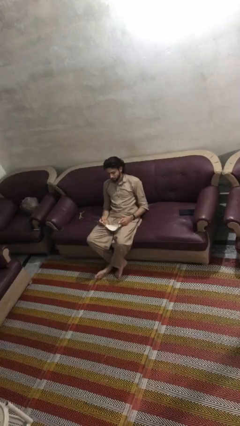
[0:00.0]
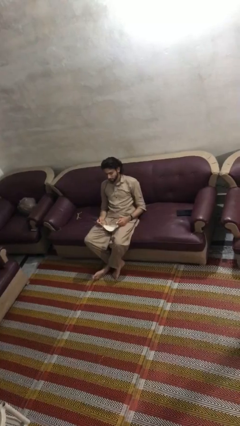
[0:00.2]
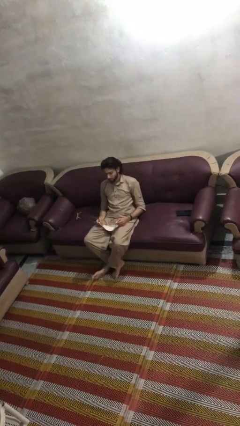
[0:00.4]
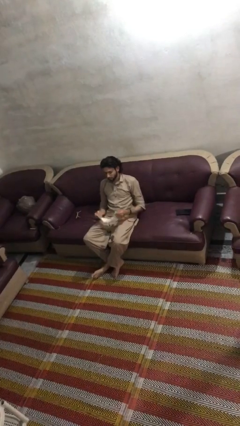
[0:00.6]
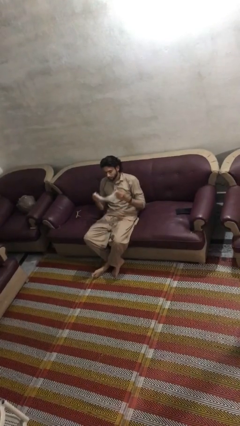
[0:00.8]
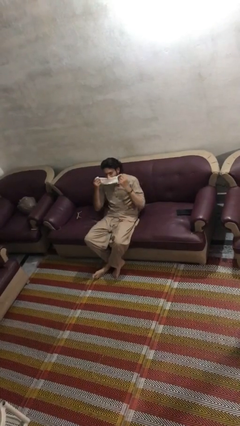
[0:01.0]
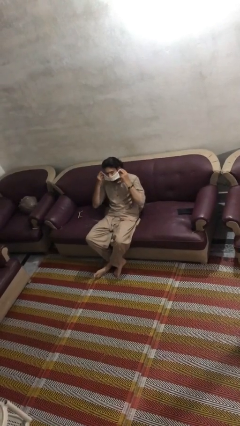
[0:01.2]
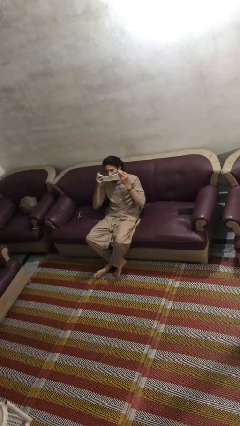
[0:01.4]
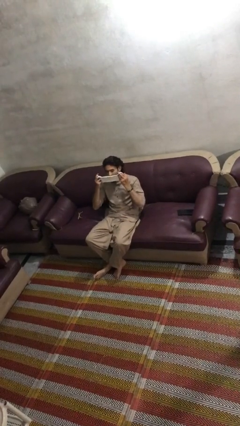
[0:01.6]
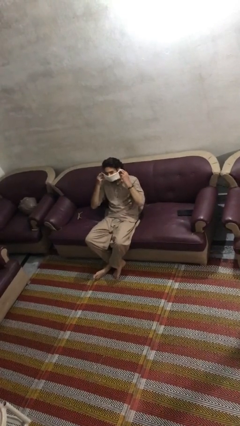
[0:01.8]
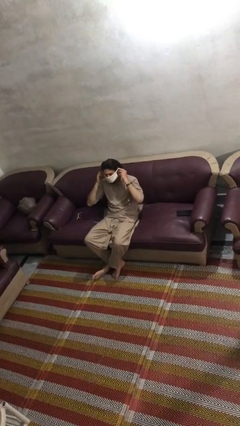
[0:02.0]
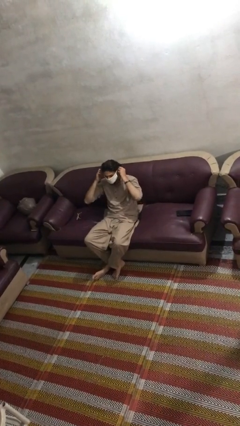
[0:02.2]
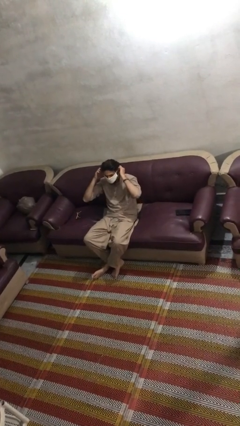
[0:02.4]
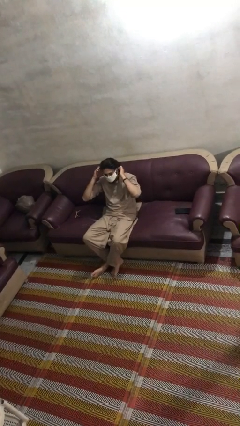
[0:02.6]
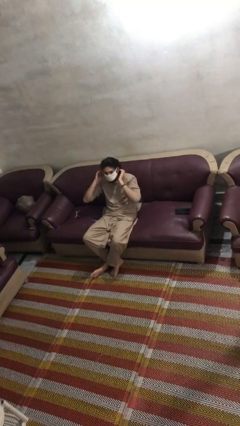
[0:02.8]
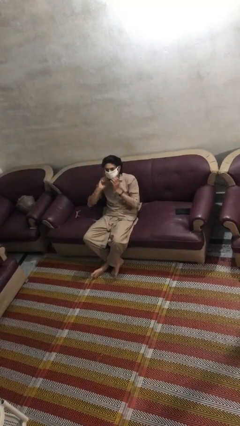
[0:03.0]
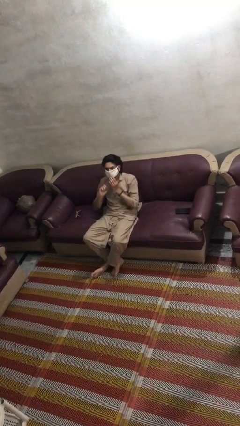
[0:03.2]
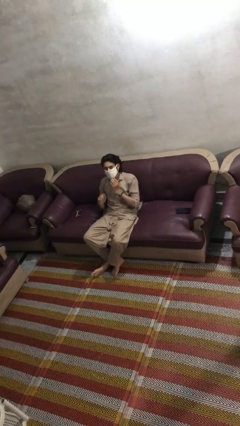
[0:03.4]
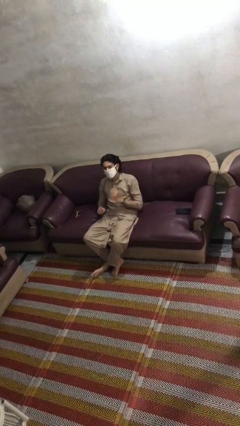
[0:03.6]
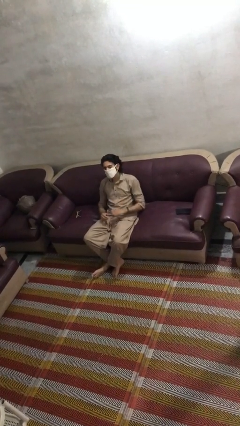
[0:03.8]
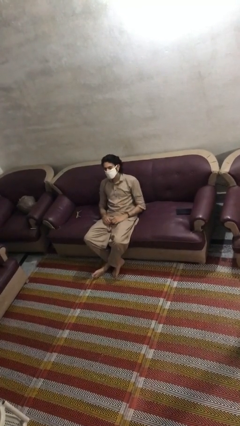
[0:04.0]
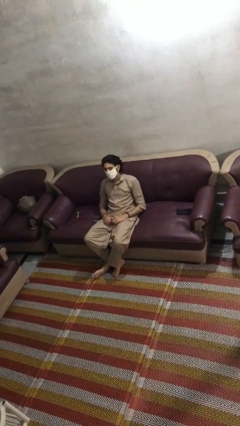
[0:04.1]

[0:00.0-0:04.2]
person puts on facemask

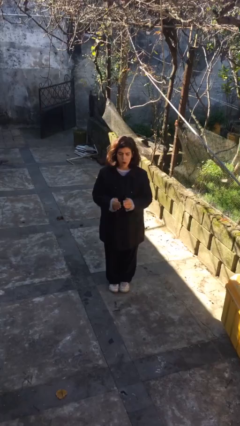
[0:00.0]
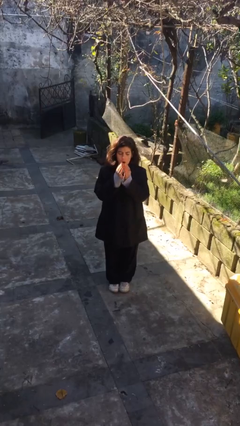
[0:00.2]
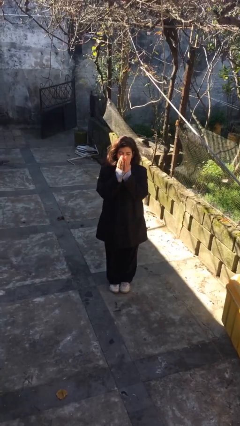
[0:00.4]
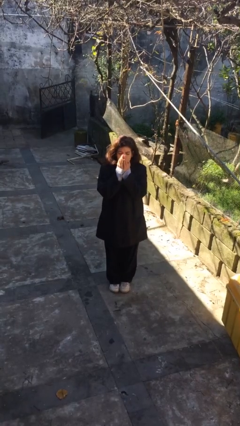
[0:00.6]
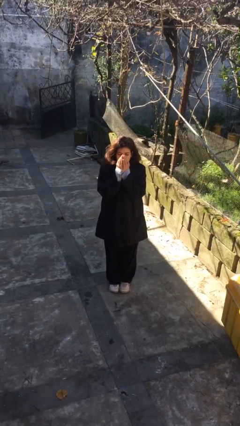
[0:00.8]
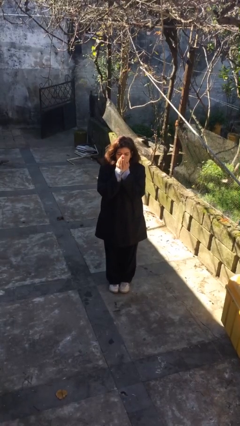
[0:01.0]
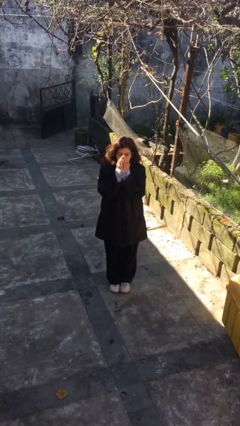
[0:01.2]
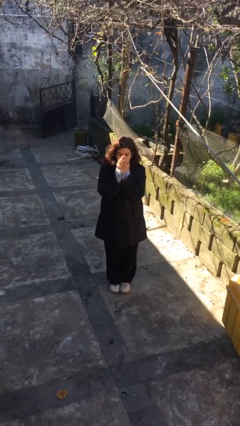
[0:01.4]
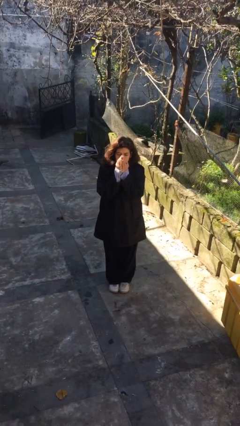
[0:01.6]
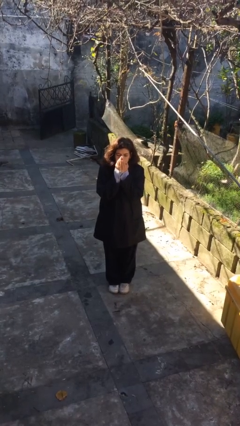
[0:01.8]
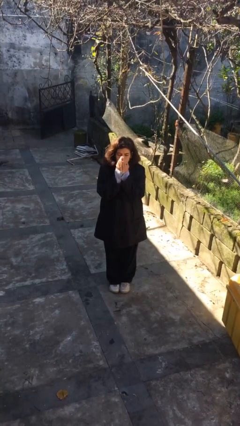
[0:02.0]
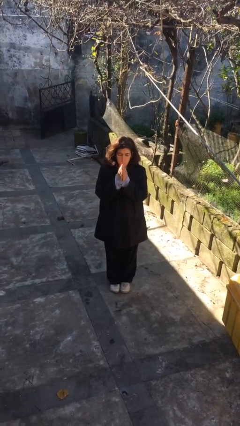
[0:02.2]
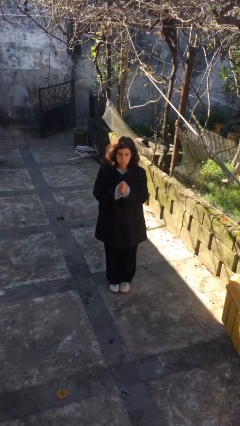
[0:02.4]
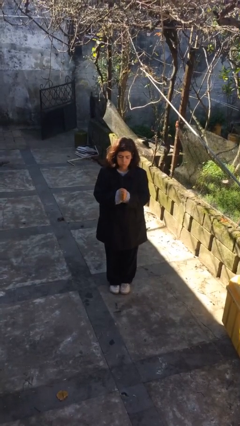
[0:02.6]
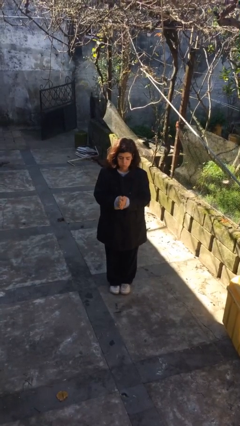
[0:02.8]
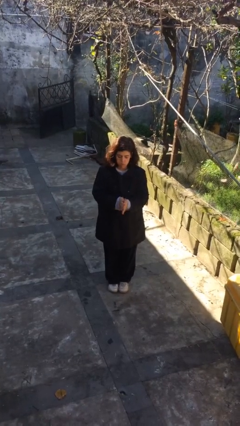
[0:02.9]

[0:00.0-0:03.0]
person blows into hands

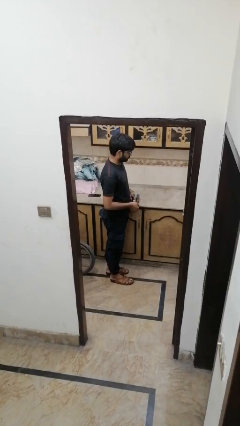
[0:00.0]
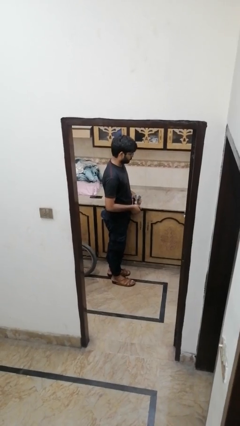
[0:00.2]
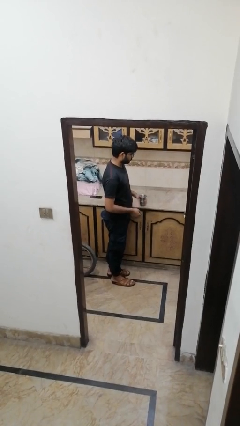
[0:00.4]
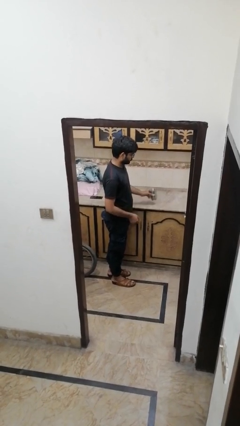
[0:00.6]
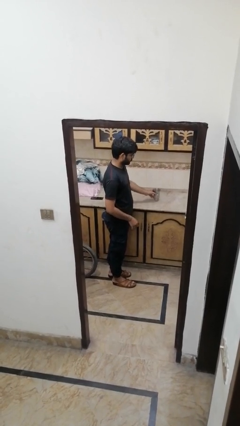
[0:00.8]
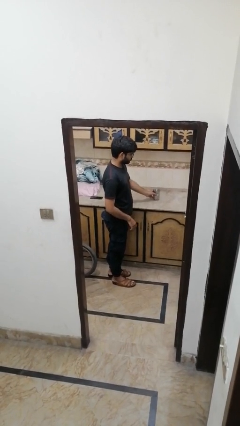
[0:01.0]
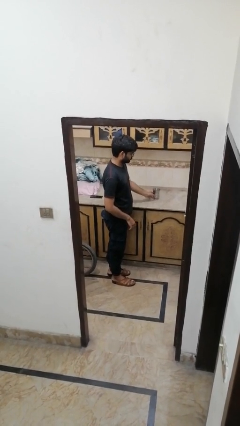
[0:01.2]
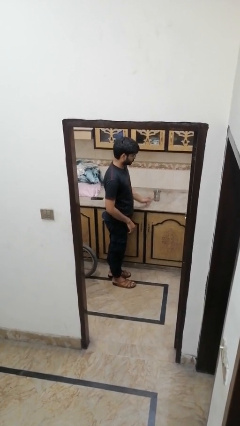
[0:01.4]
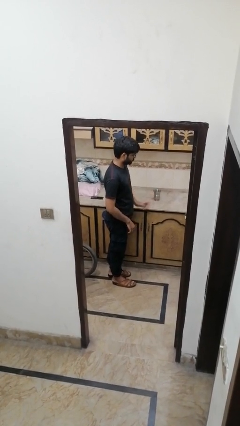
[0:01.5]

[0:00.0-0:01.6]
person puts down object on countertop

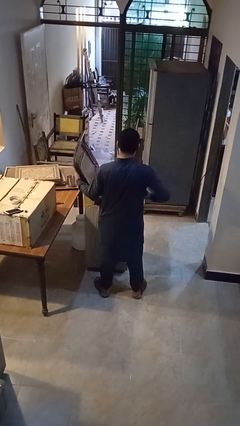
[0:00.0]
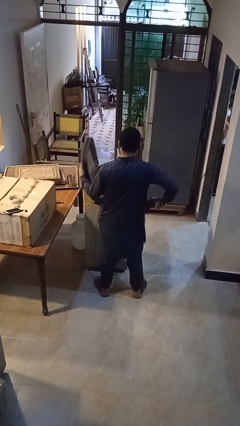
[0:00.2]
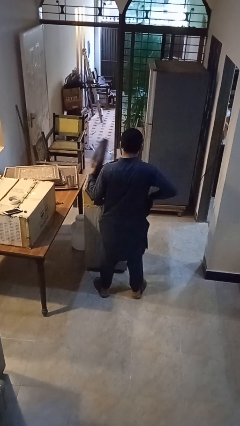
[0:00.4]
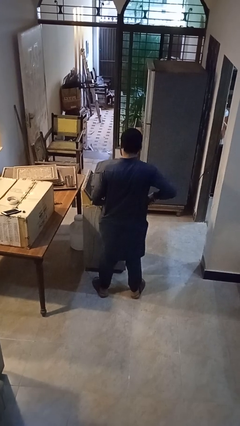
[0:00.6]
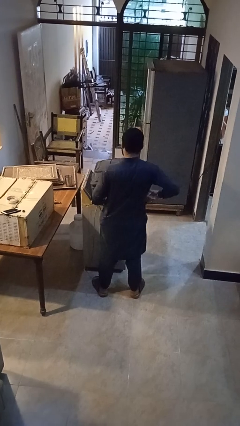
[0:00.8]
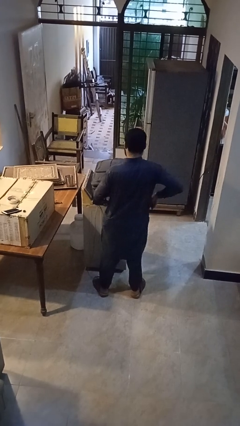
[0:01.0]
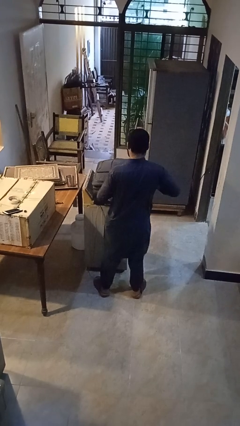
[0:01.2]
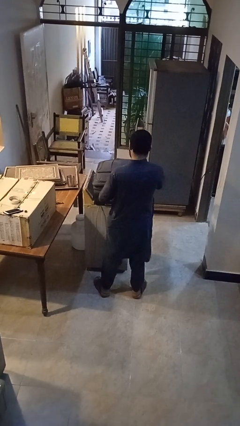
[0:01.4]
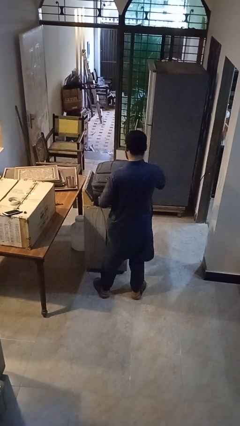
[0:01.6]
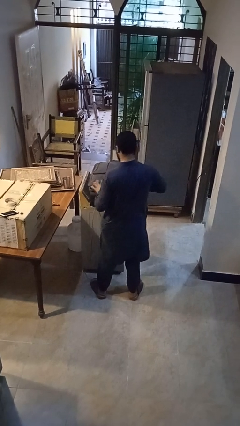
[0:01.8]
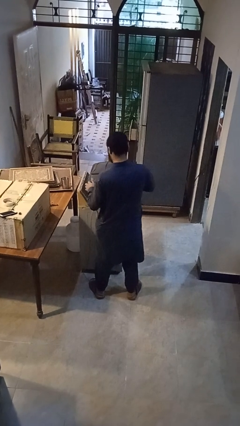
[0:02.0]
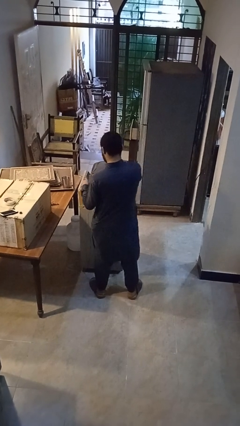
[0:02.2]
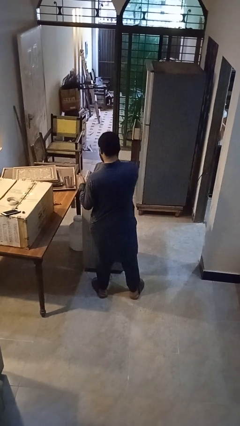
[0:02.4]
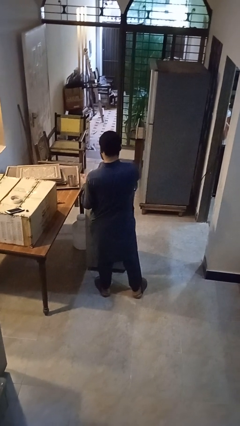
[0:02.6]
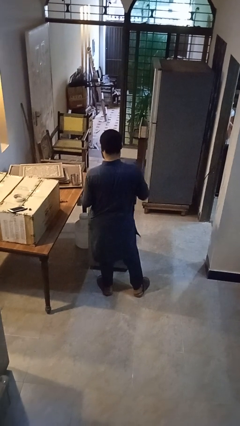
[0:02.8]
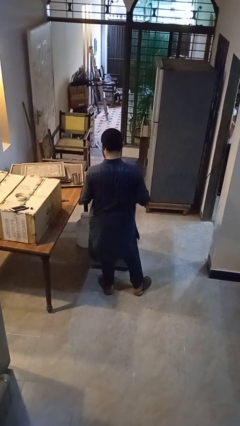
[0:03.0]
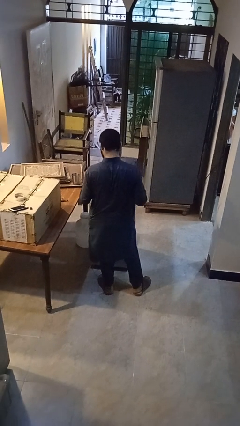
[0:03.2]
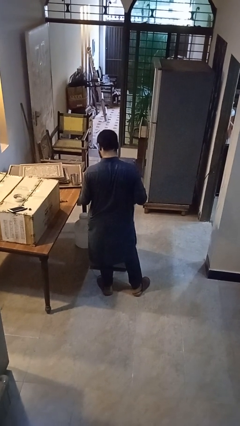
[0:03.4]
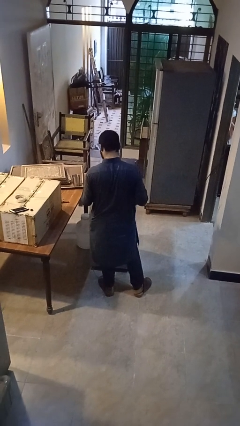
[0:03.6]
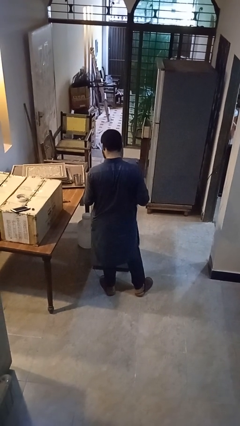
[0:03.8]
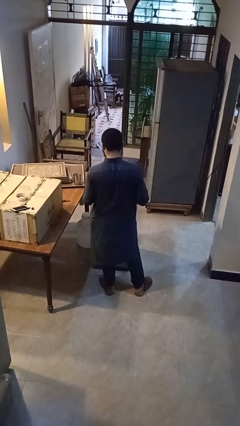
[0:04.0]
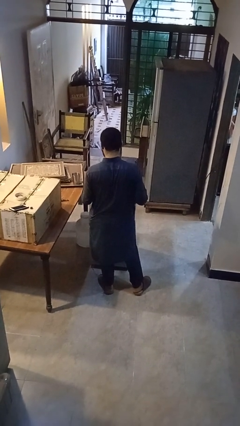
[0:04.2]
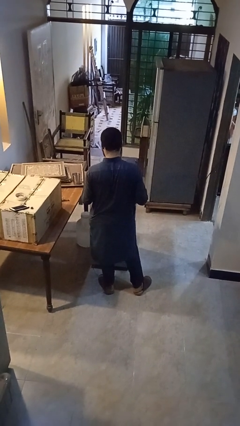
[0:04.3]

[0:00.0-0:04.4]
person closes suitcase

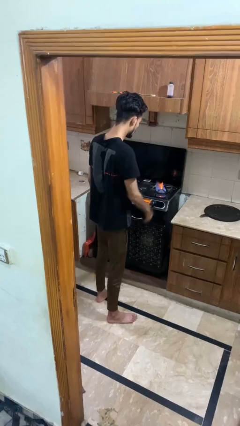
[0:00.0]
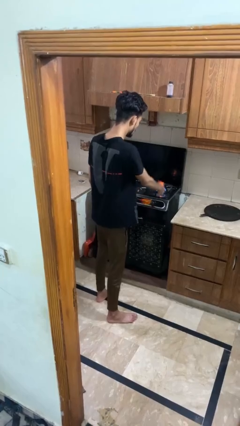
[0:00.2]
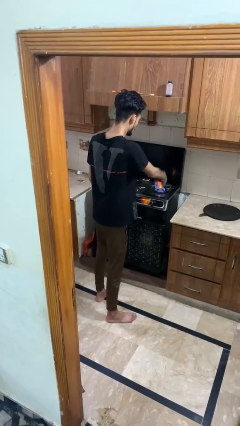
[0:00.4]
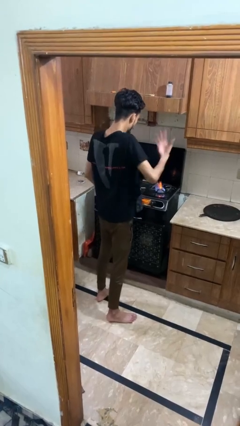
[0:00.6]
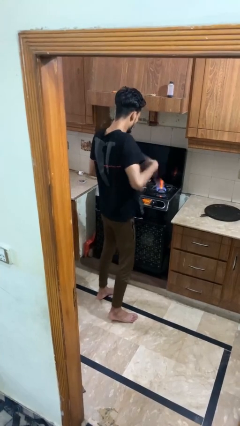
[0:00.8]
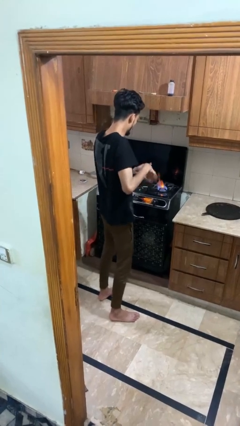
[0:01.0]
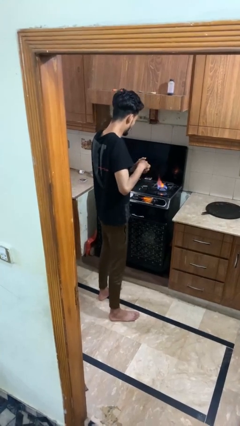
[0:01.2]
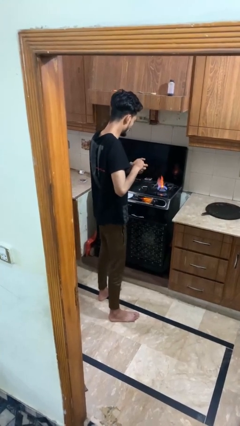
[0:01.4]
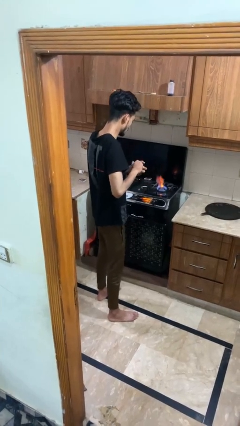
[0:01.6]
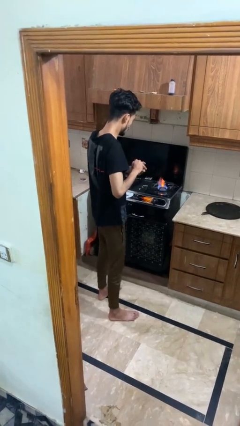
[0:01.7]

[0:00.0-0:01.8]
person burns hand

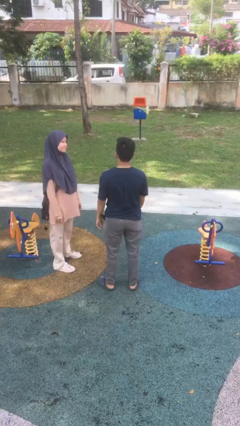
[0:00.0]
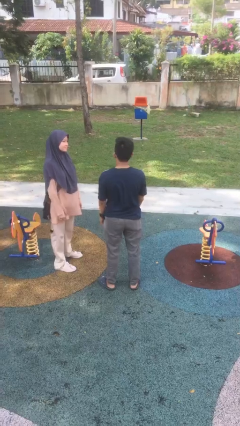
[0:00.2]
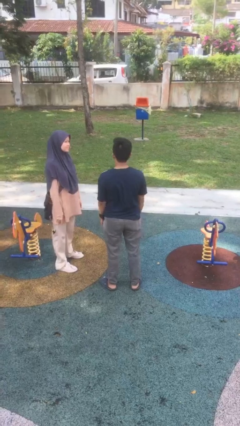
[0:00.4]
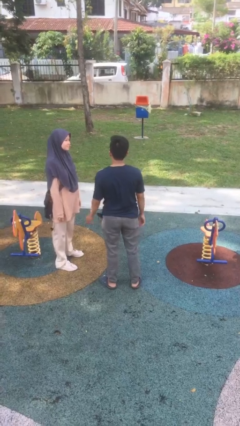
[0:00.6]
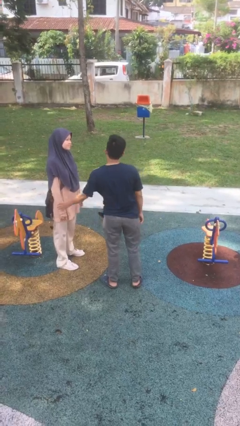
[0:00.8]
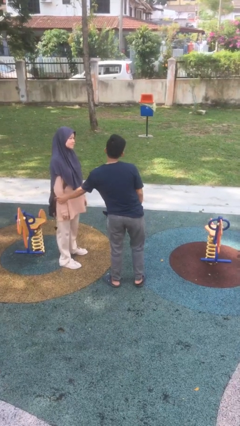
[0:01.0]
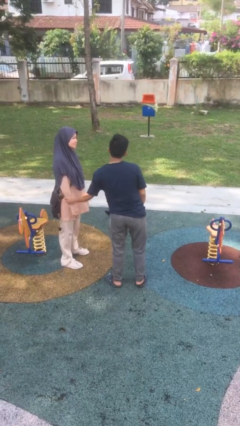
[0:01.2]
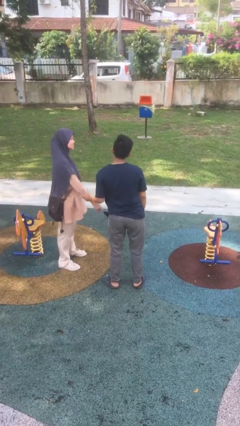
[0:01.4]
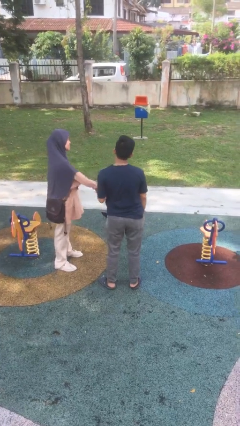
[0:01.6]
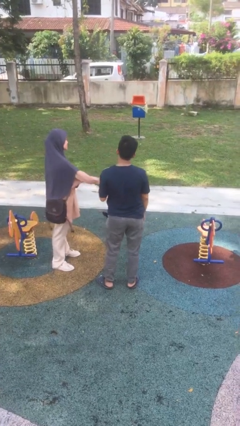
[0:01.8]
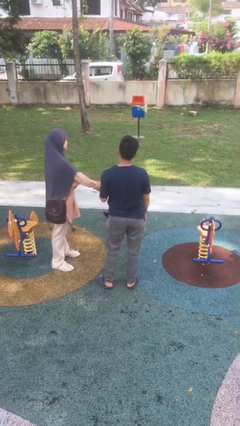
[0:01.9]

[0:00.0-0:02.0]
person grabs person by forearm

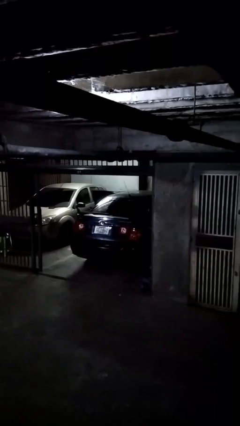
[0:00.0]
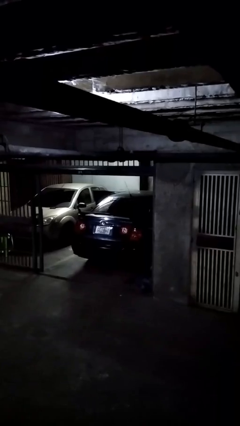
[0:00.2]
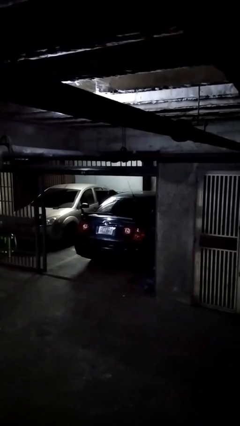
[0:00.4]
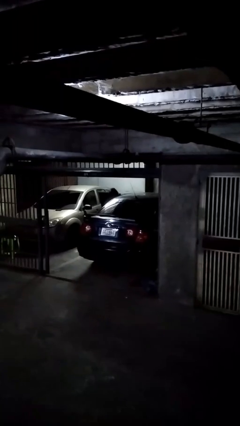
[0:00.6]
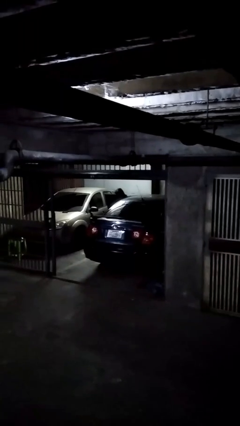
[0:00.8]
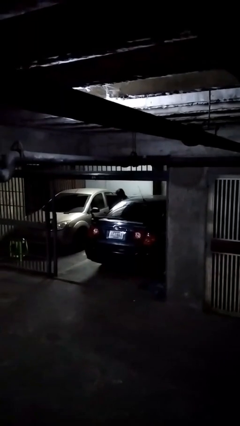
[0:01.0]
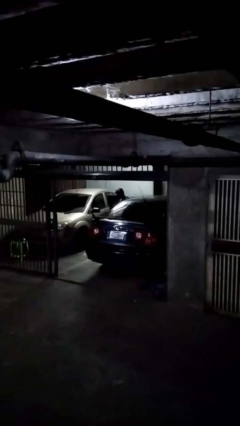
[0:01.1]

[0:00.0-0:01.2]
person exits car
